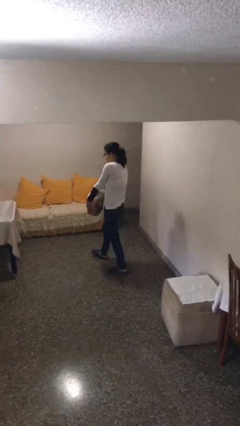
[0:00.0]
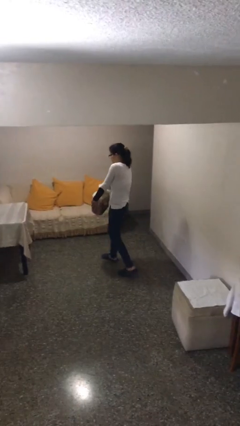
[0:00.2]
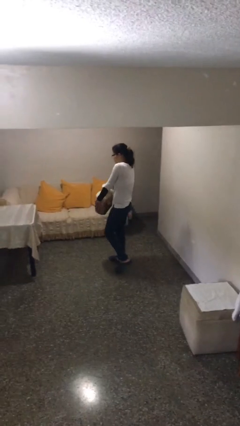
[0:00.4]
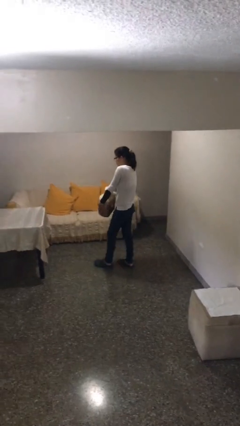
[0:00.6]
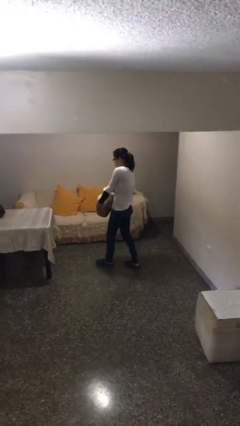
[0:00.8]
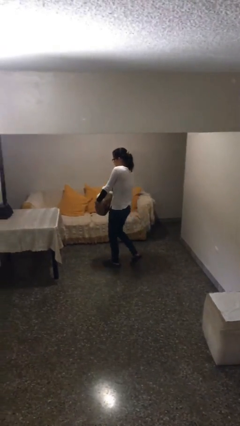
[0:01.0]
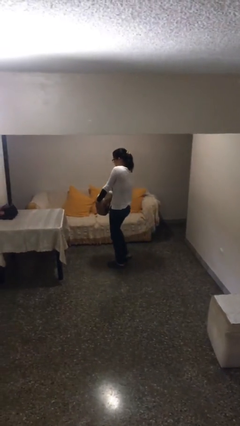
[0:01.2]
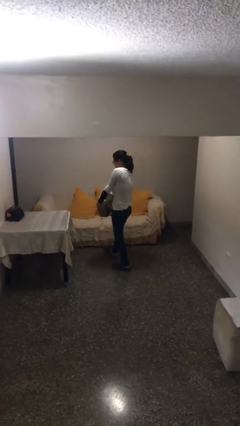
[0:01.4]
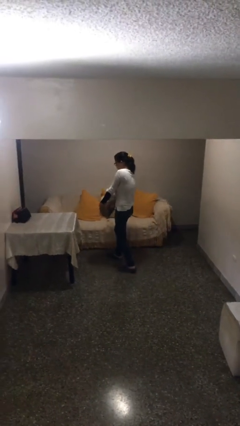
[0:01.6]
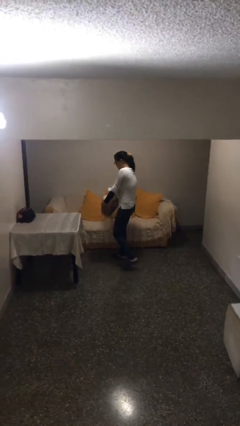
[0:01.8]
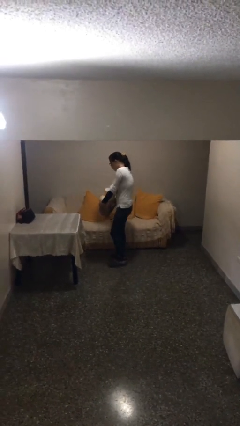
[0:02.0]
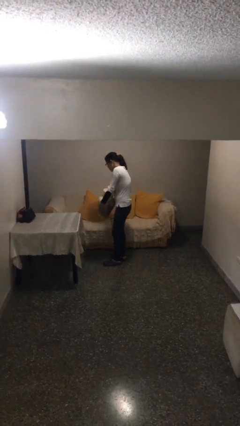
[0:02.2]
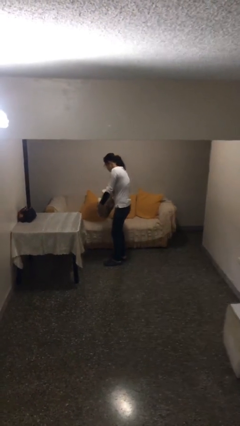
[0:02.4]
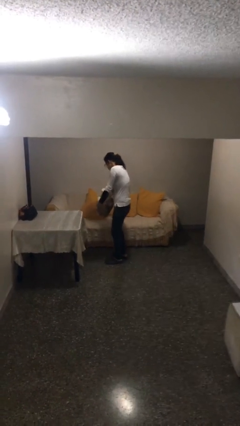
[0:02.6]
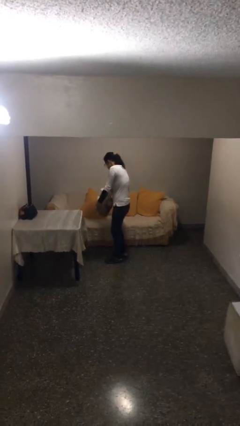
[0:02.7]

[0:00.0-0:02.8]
person carries heavy object

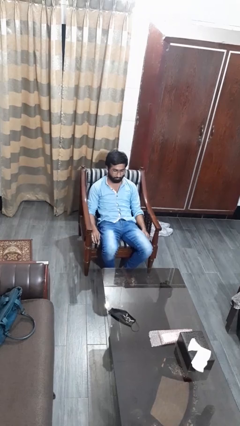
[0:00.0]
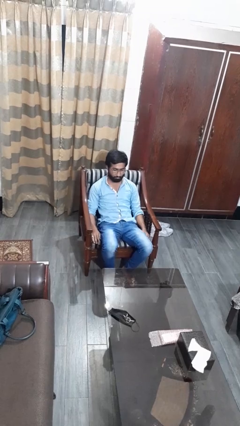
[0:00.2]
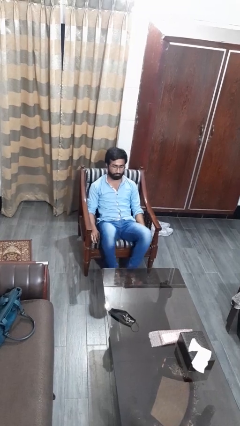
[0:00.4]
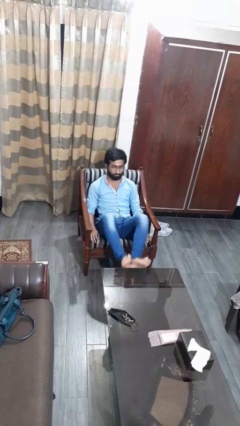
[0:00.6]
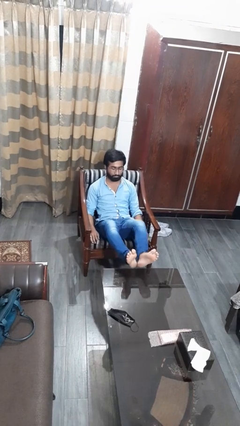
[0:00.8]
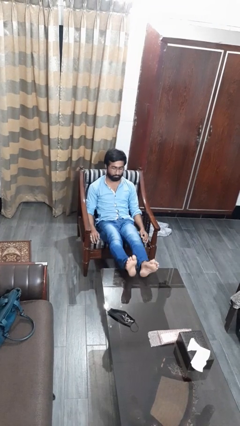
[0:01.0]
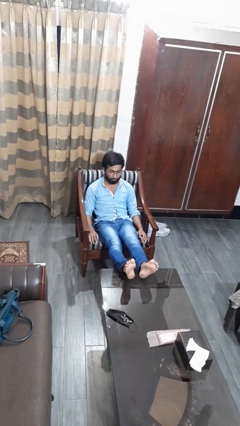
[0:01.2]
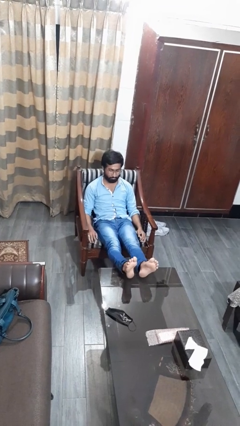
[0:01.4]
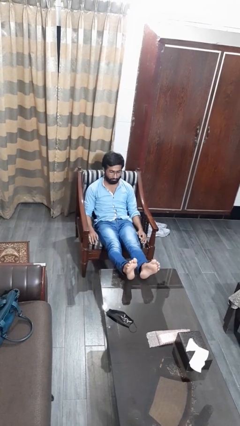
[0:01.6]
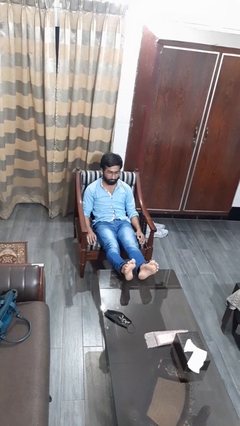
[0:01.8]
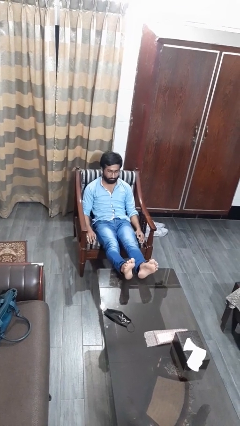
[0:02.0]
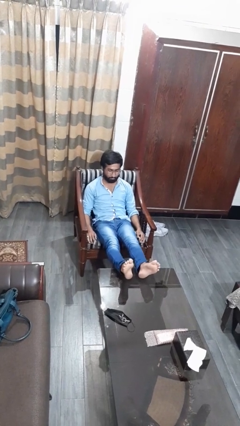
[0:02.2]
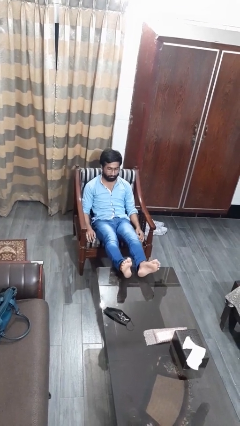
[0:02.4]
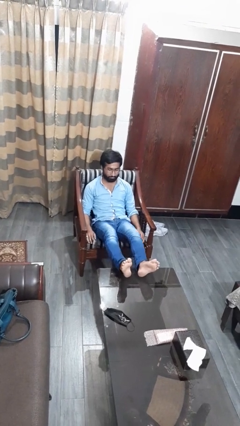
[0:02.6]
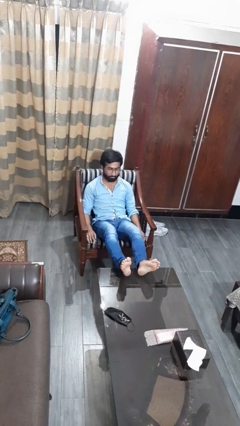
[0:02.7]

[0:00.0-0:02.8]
person puts feet up

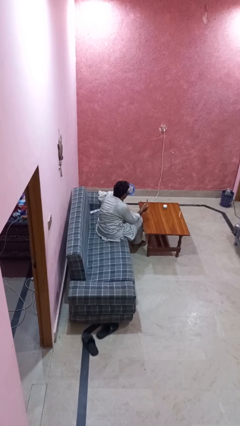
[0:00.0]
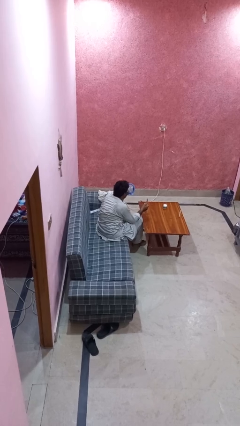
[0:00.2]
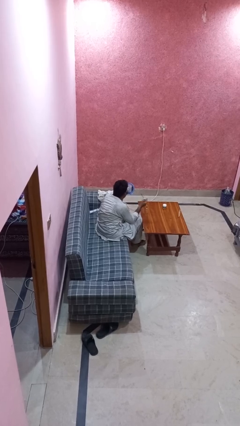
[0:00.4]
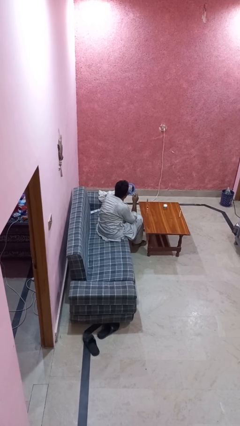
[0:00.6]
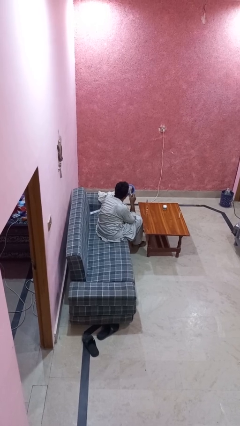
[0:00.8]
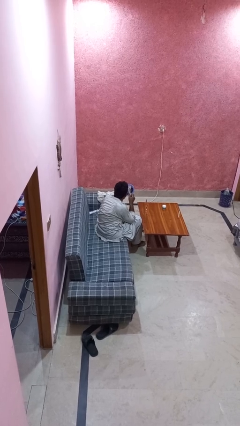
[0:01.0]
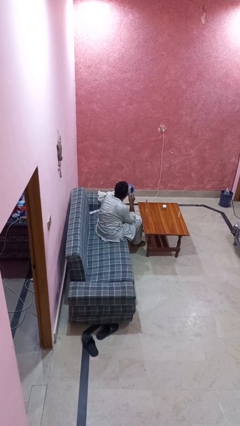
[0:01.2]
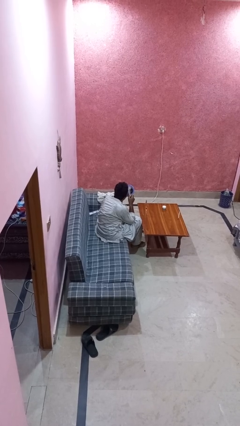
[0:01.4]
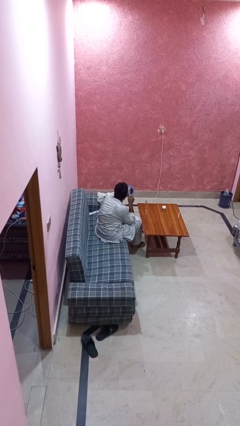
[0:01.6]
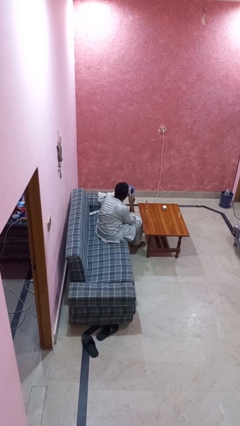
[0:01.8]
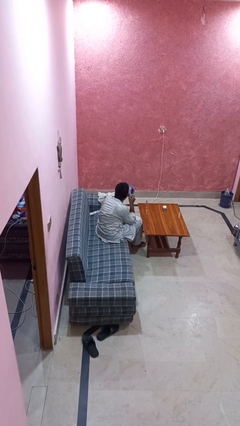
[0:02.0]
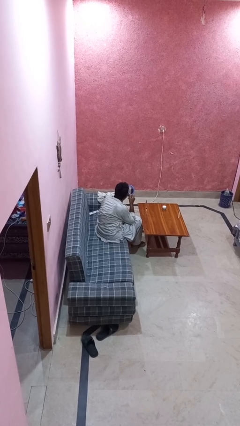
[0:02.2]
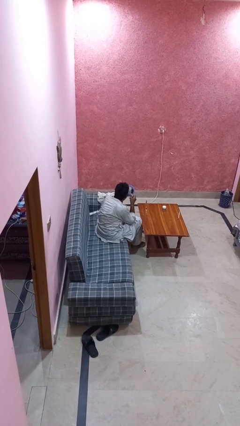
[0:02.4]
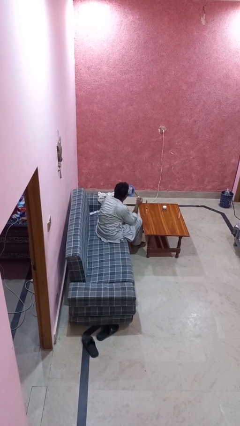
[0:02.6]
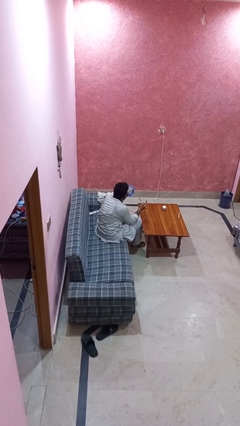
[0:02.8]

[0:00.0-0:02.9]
person applies eye makeup

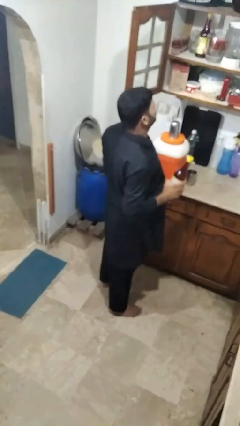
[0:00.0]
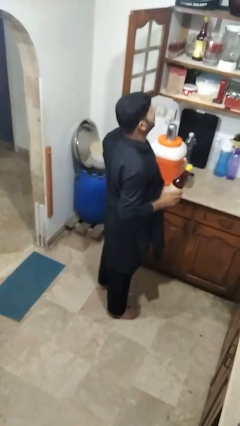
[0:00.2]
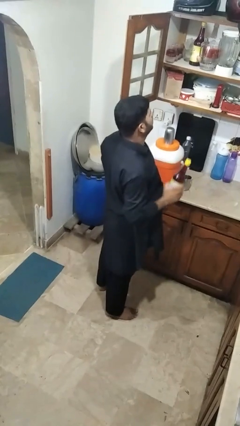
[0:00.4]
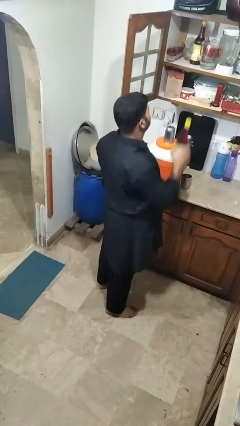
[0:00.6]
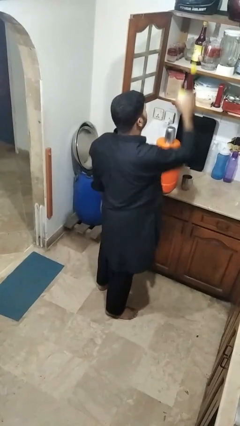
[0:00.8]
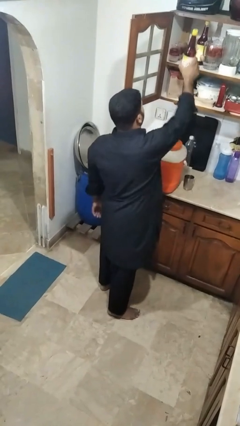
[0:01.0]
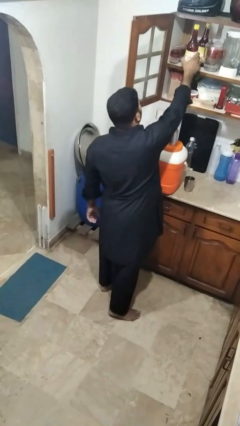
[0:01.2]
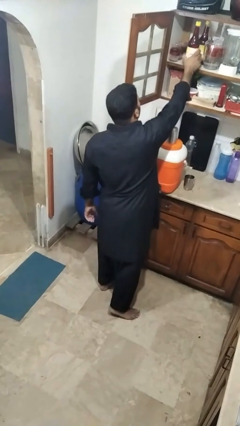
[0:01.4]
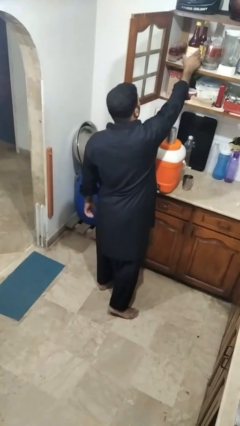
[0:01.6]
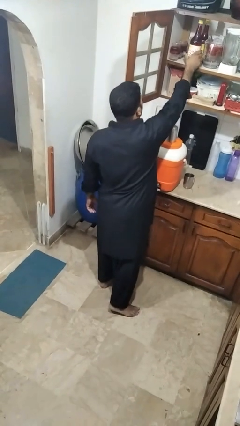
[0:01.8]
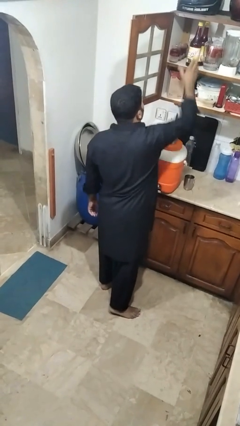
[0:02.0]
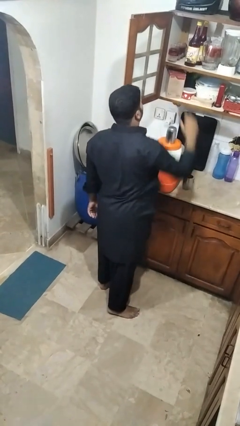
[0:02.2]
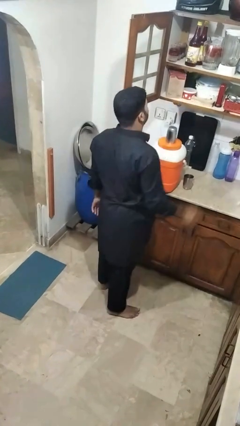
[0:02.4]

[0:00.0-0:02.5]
person puts down object into cabinet

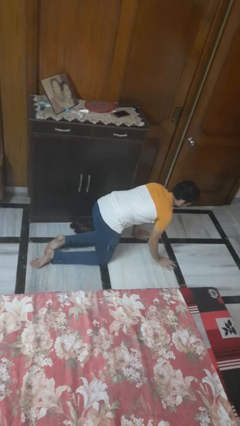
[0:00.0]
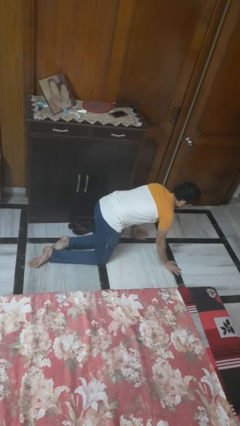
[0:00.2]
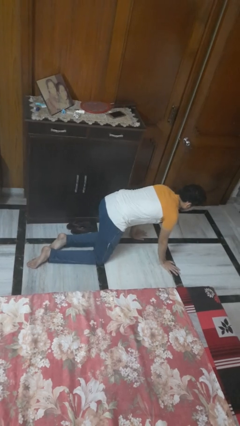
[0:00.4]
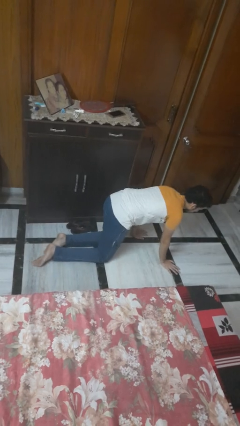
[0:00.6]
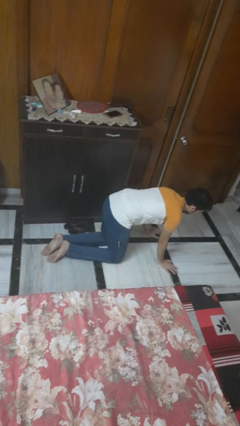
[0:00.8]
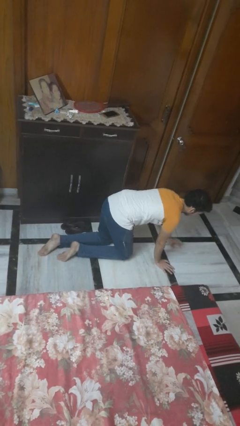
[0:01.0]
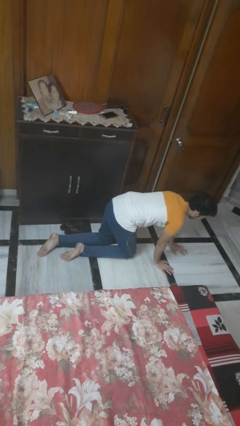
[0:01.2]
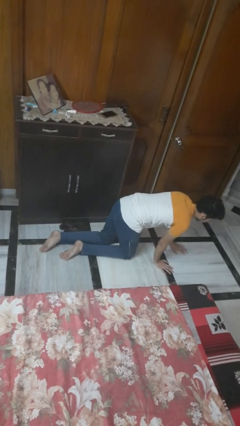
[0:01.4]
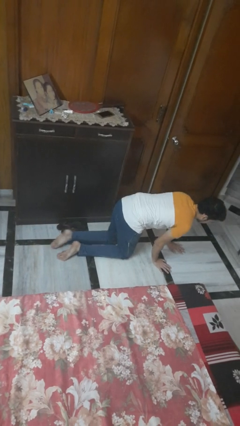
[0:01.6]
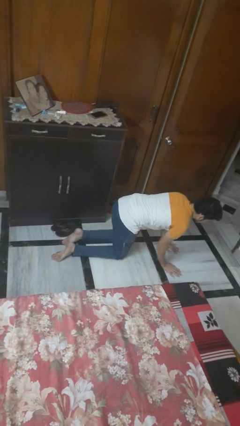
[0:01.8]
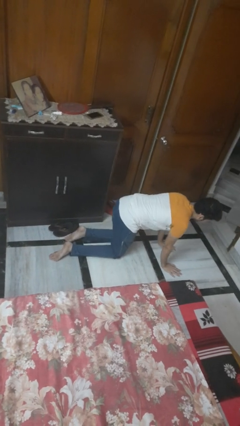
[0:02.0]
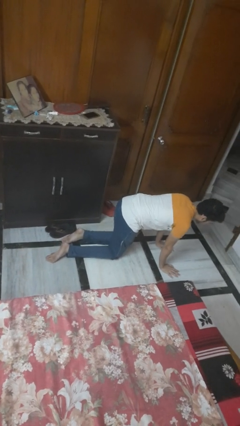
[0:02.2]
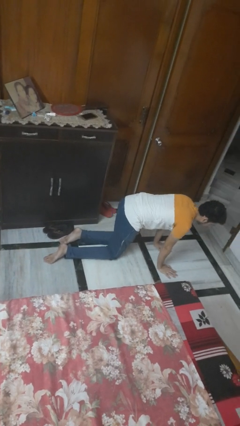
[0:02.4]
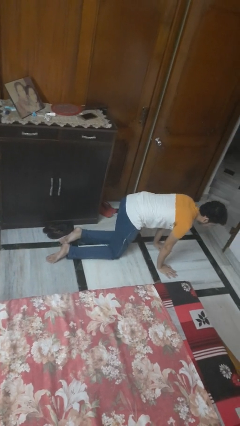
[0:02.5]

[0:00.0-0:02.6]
person crawls

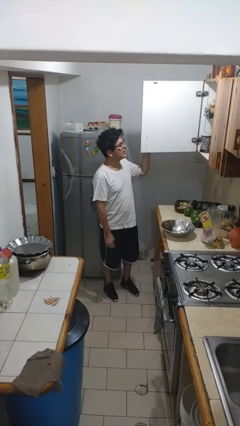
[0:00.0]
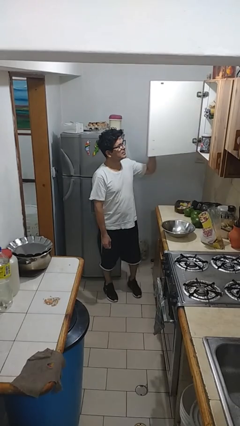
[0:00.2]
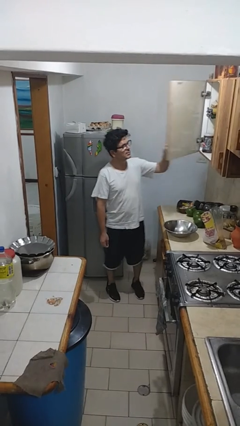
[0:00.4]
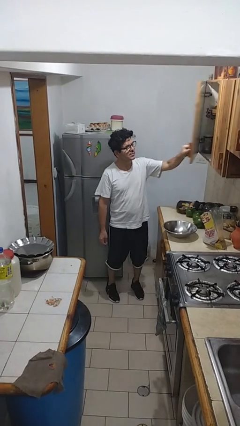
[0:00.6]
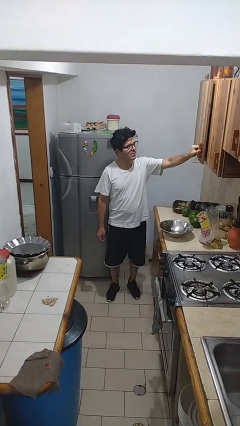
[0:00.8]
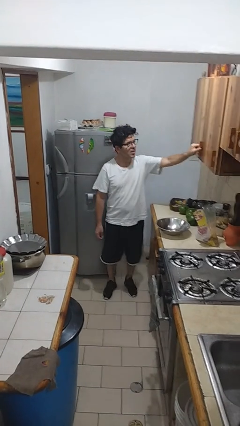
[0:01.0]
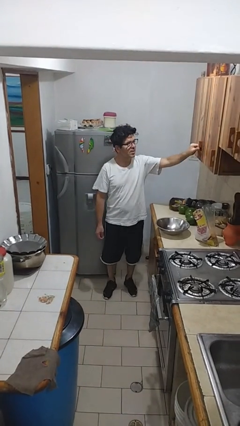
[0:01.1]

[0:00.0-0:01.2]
person closes kitchen drawer

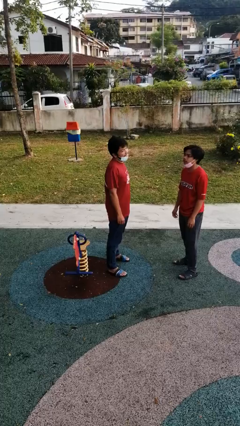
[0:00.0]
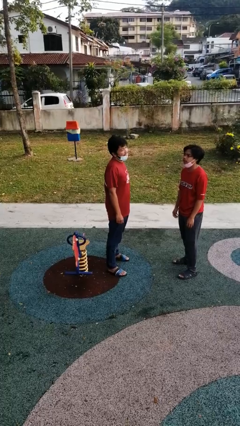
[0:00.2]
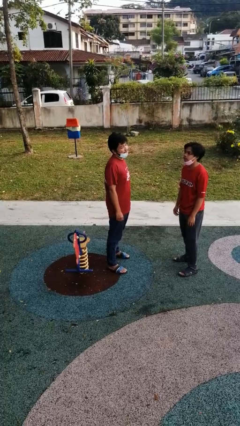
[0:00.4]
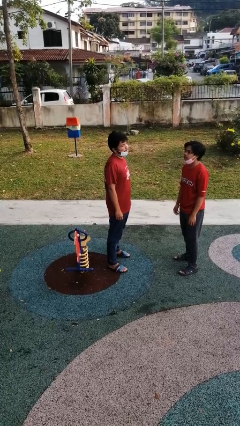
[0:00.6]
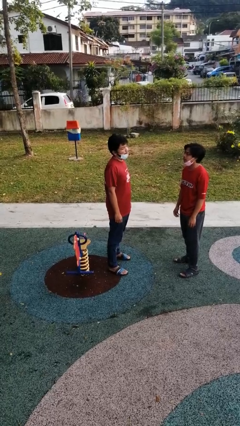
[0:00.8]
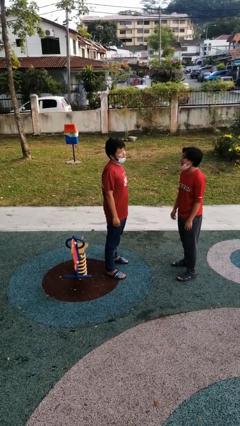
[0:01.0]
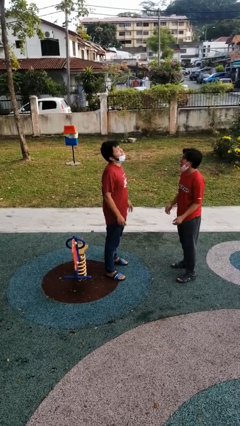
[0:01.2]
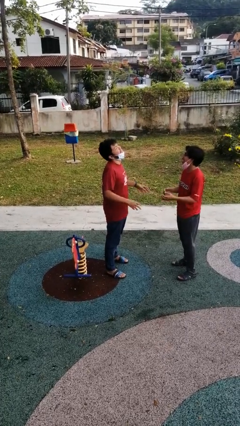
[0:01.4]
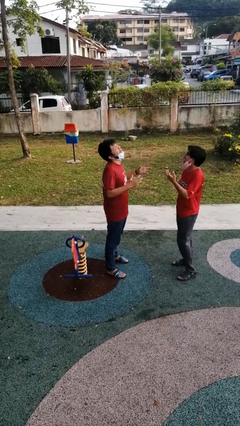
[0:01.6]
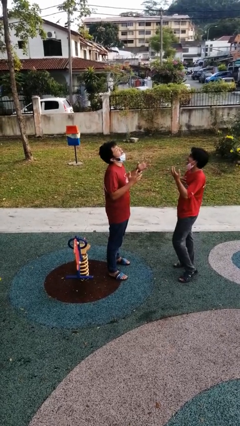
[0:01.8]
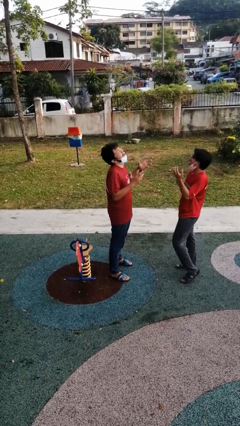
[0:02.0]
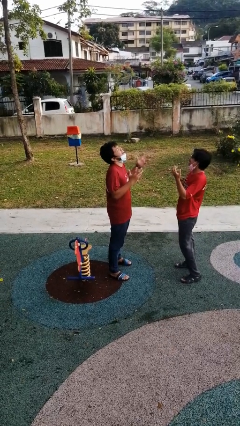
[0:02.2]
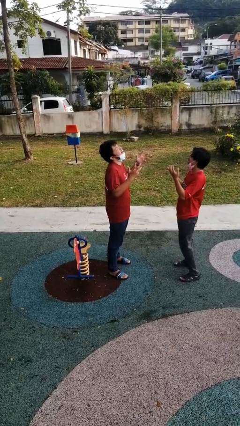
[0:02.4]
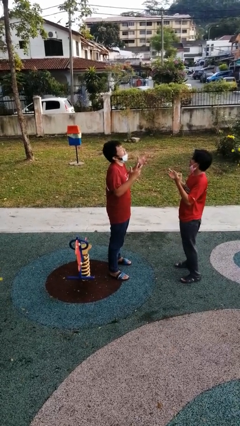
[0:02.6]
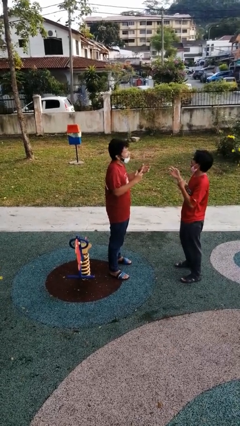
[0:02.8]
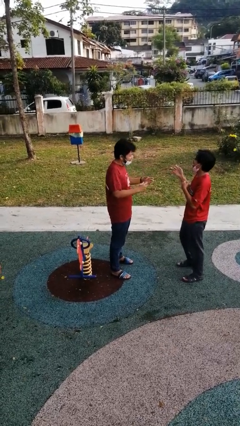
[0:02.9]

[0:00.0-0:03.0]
person laughs with person
